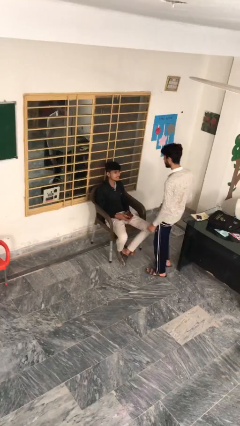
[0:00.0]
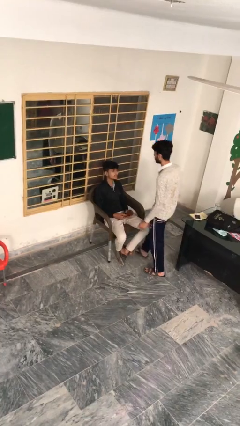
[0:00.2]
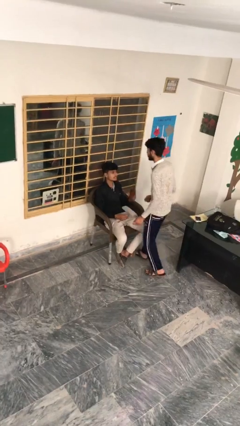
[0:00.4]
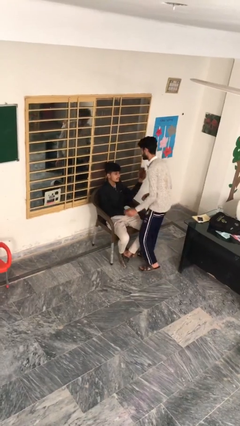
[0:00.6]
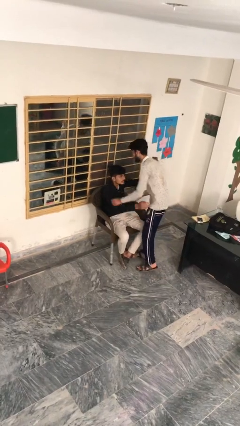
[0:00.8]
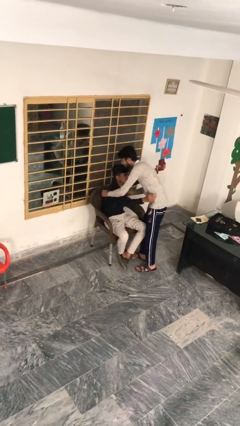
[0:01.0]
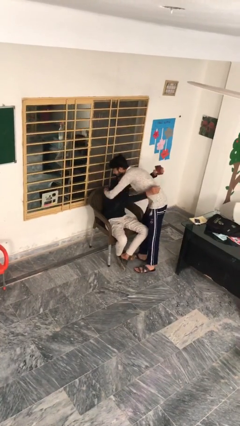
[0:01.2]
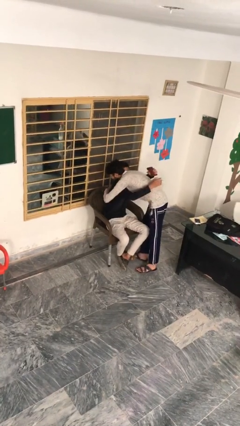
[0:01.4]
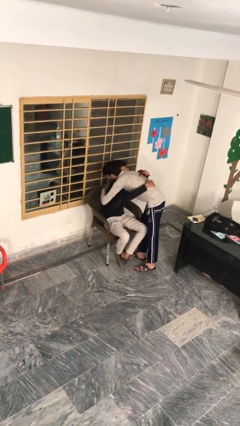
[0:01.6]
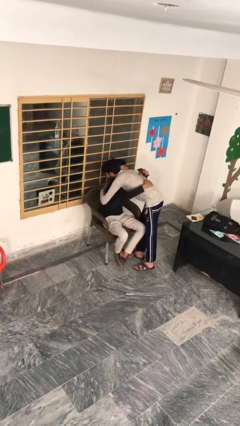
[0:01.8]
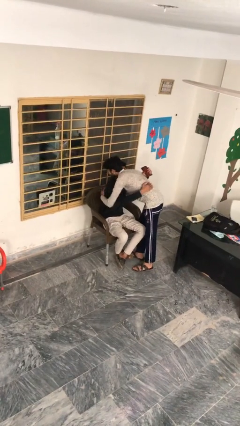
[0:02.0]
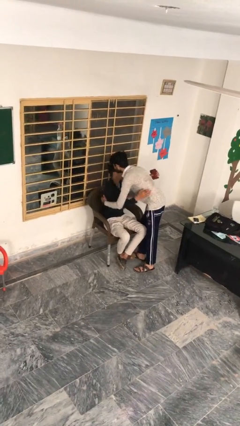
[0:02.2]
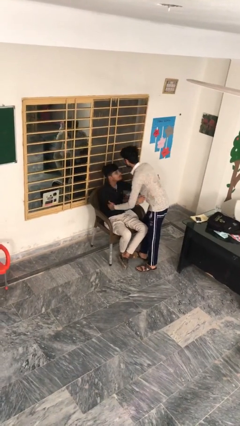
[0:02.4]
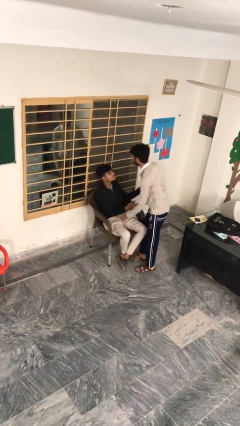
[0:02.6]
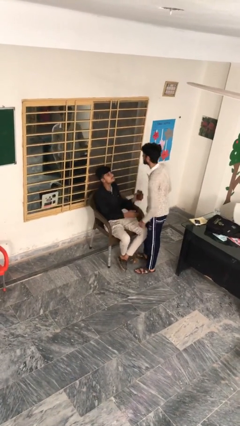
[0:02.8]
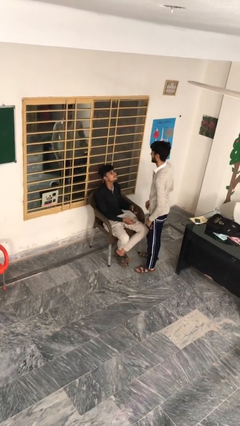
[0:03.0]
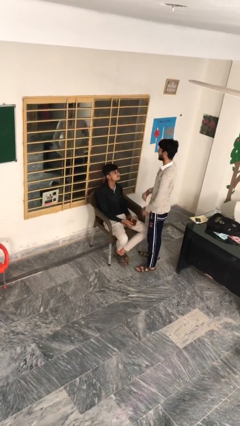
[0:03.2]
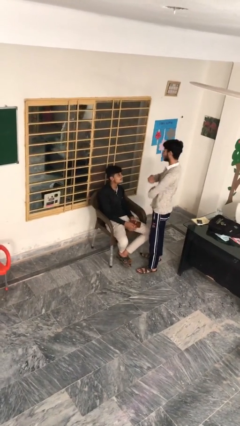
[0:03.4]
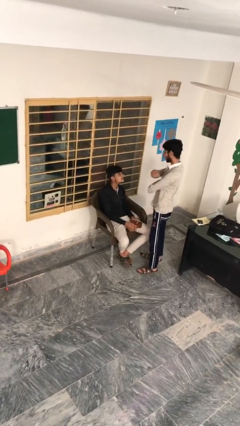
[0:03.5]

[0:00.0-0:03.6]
person embraces person

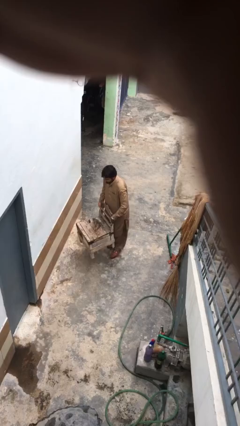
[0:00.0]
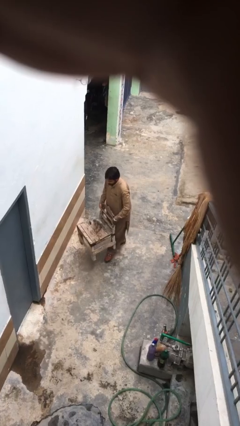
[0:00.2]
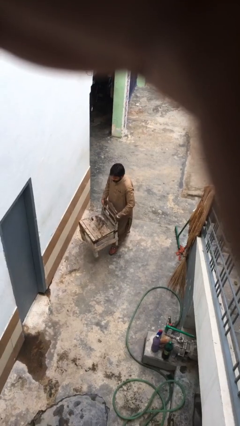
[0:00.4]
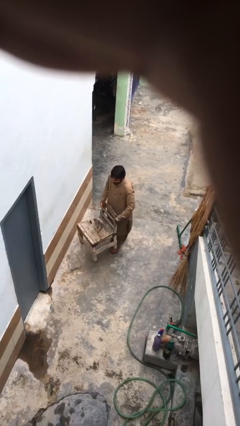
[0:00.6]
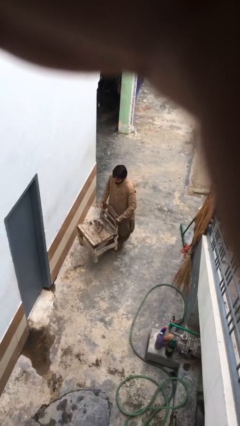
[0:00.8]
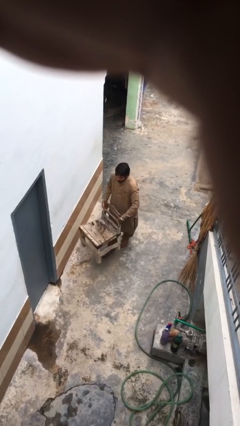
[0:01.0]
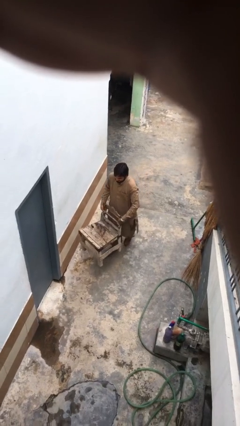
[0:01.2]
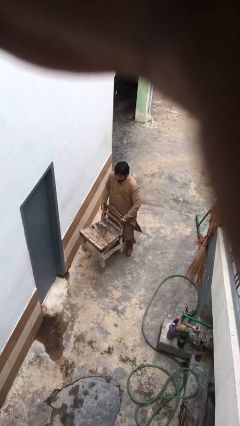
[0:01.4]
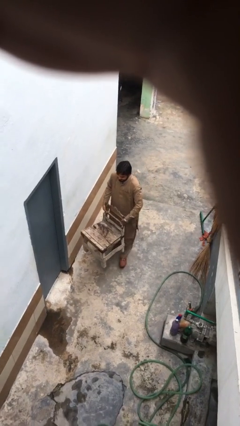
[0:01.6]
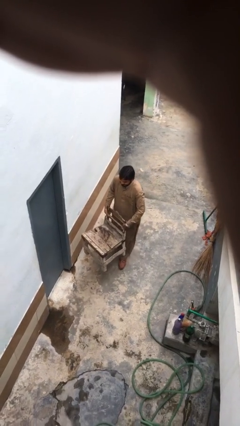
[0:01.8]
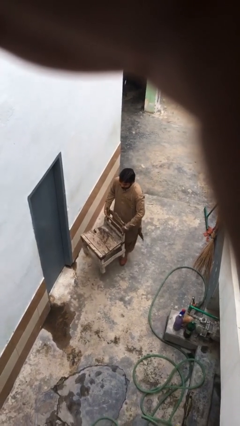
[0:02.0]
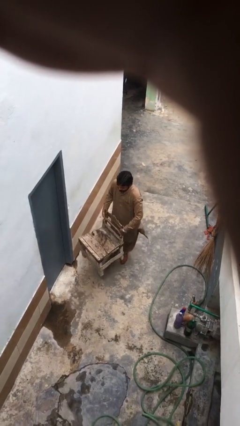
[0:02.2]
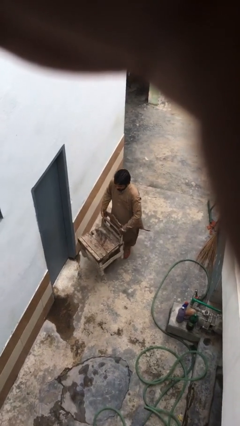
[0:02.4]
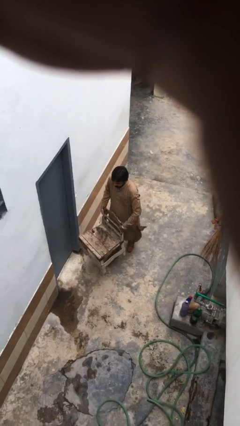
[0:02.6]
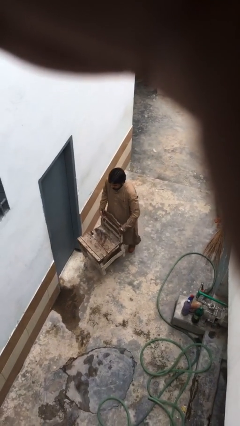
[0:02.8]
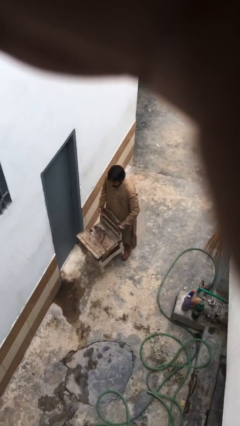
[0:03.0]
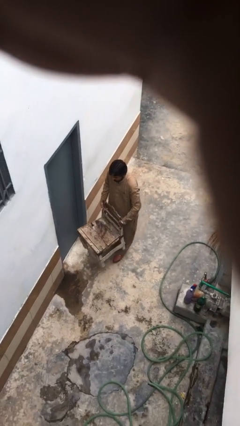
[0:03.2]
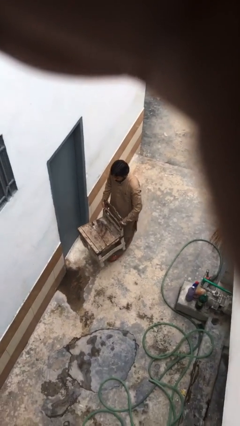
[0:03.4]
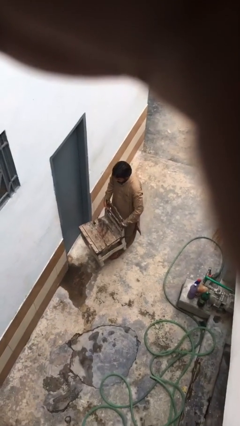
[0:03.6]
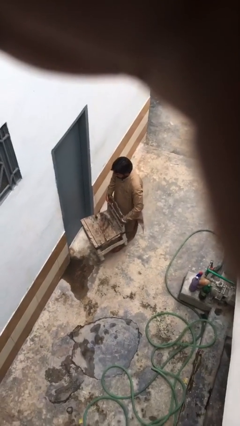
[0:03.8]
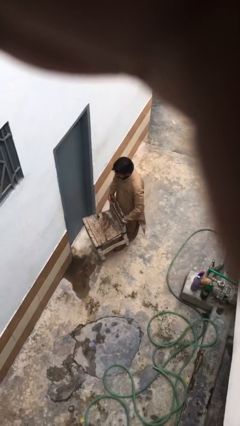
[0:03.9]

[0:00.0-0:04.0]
person carries heavy object

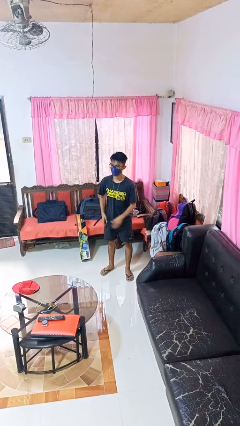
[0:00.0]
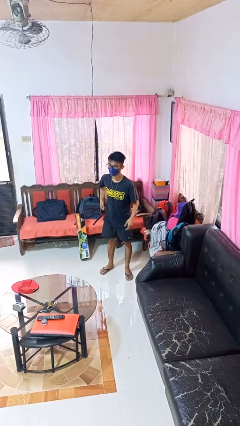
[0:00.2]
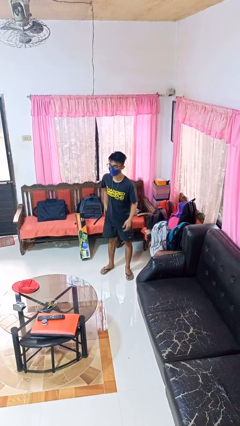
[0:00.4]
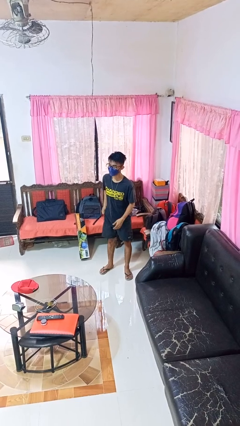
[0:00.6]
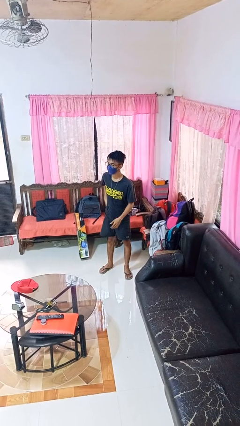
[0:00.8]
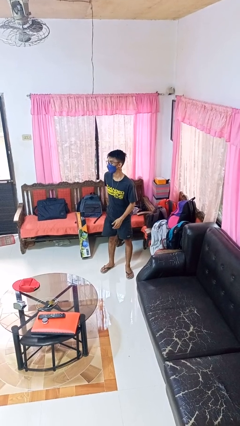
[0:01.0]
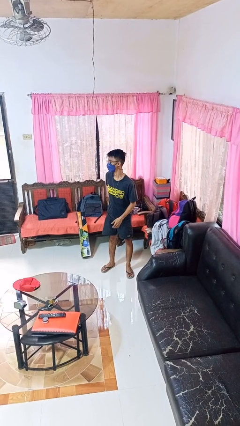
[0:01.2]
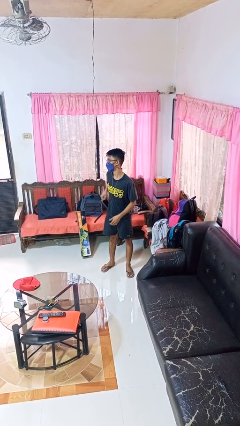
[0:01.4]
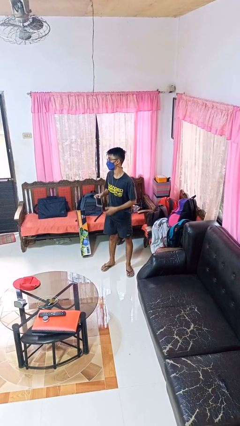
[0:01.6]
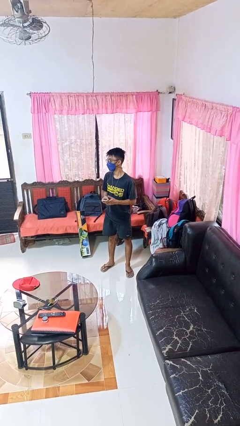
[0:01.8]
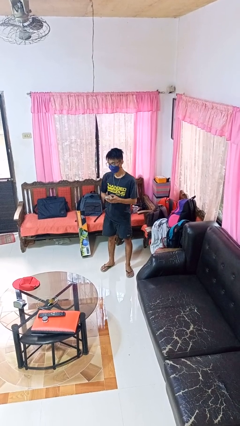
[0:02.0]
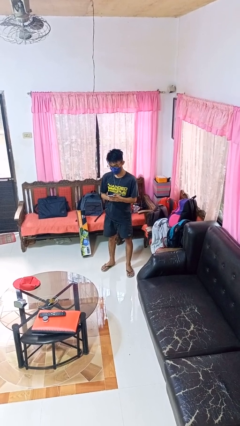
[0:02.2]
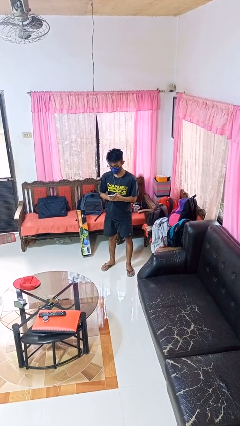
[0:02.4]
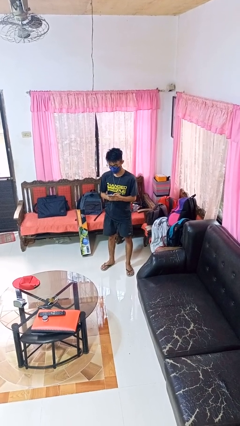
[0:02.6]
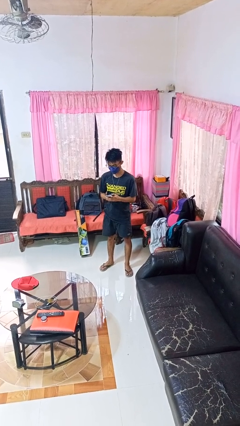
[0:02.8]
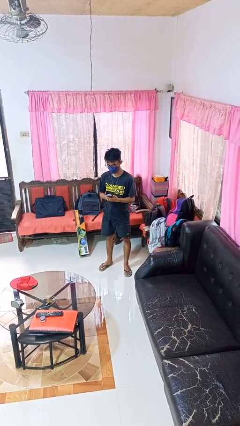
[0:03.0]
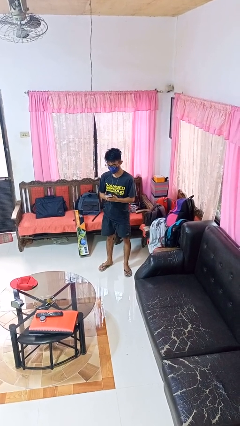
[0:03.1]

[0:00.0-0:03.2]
person takes phone from pocket

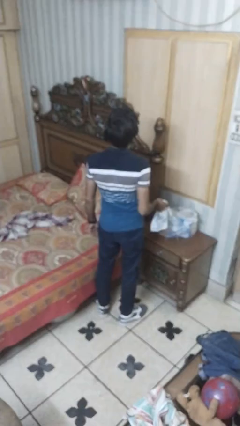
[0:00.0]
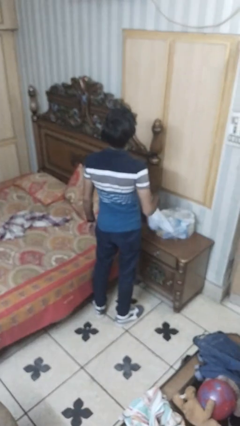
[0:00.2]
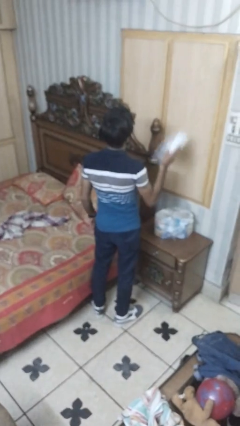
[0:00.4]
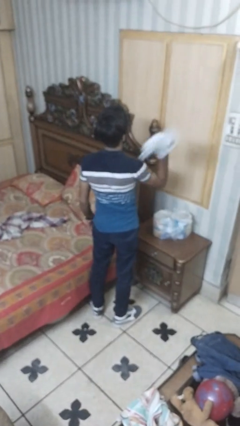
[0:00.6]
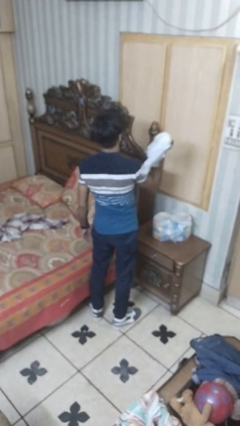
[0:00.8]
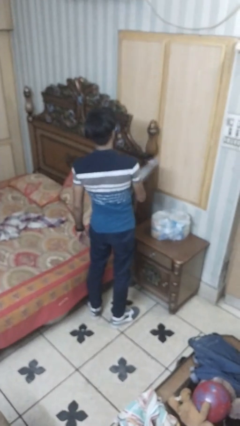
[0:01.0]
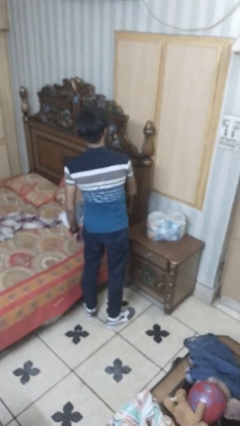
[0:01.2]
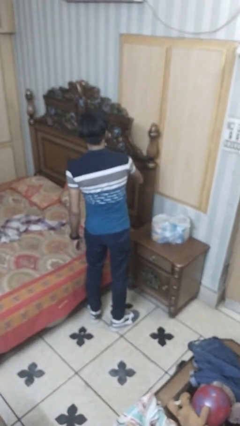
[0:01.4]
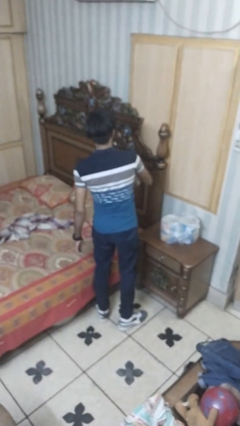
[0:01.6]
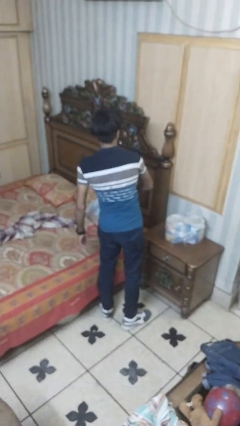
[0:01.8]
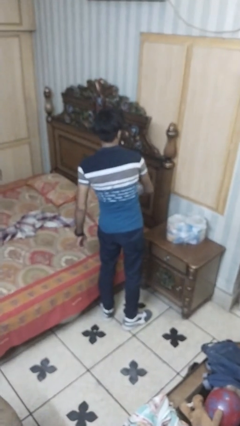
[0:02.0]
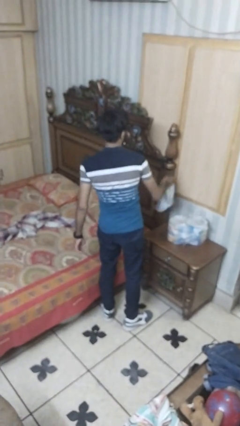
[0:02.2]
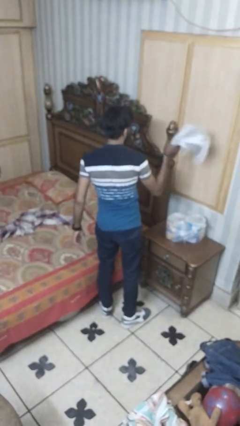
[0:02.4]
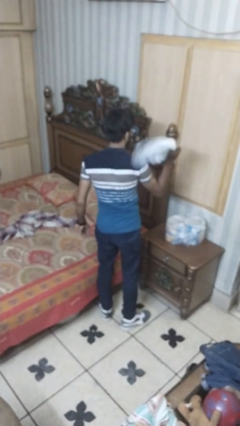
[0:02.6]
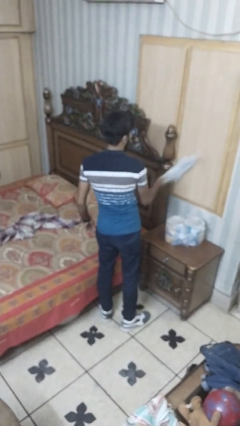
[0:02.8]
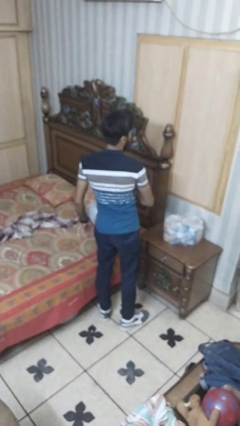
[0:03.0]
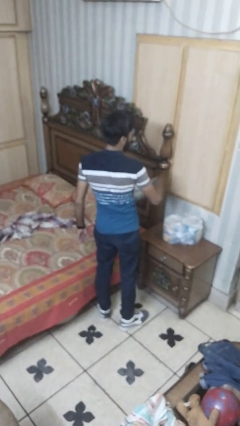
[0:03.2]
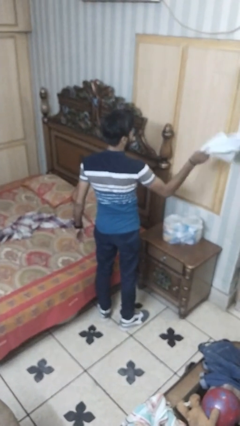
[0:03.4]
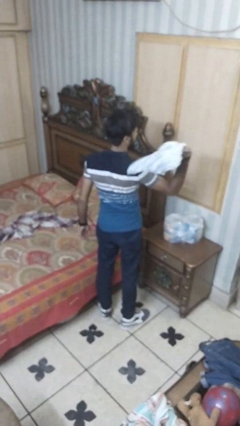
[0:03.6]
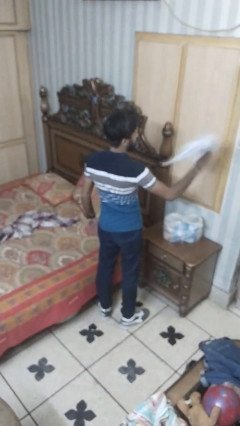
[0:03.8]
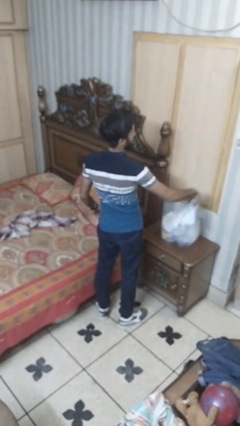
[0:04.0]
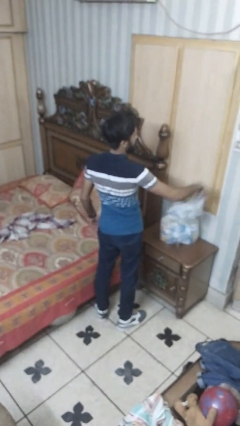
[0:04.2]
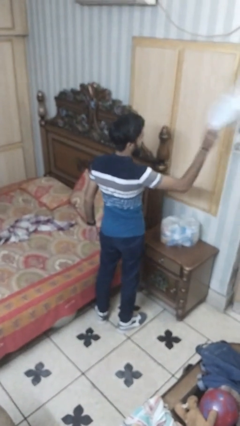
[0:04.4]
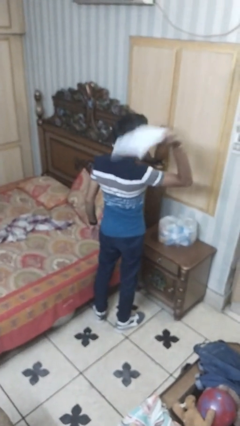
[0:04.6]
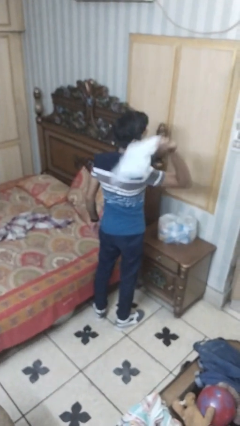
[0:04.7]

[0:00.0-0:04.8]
person dusts furniture

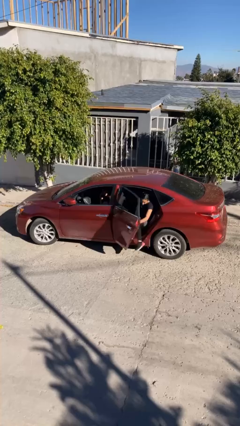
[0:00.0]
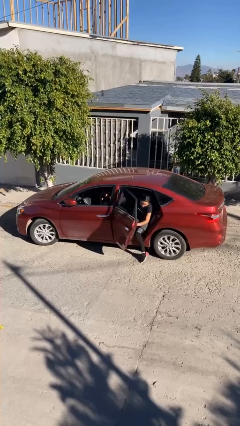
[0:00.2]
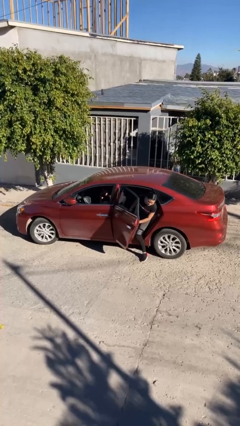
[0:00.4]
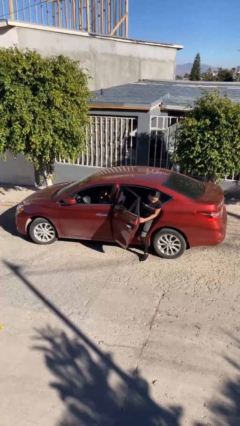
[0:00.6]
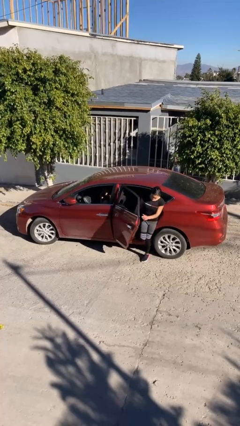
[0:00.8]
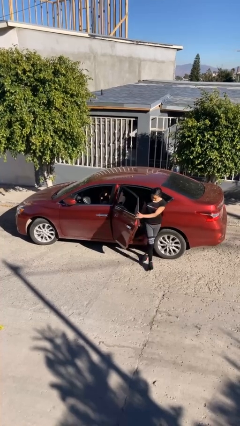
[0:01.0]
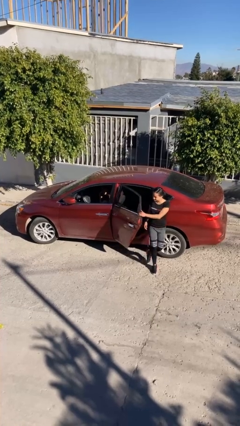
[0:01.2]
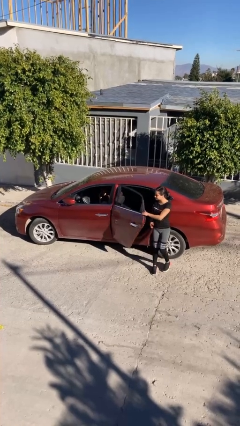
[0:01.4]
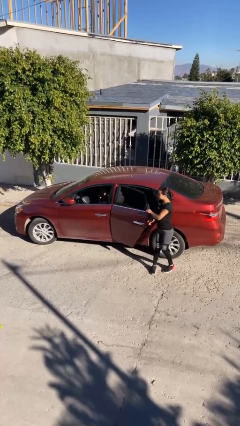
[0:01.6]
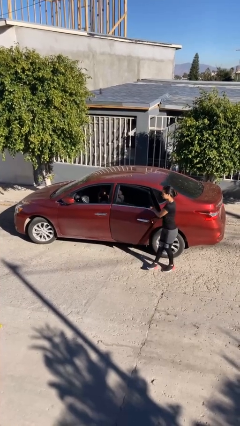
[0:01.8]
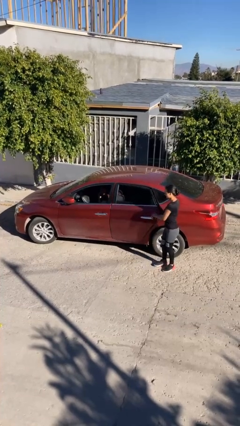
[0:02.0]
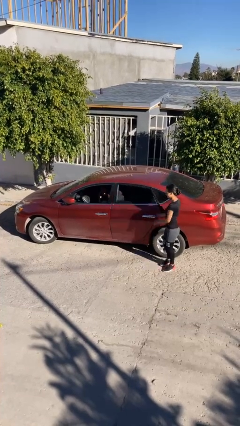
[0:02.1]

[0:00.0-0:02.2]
car drops off person
